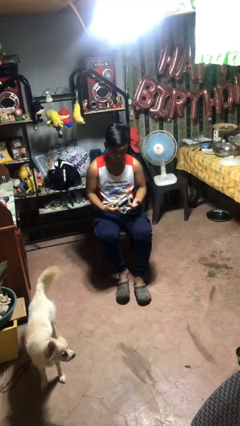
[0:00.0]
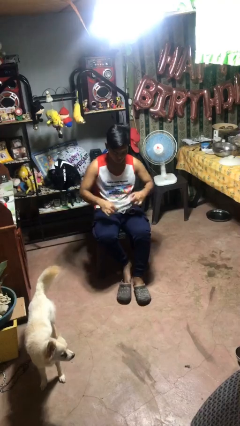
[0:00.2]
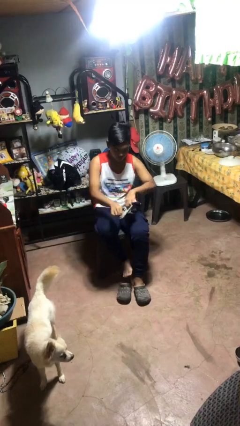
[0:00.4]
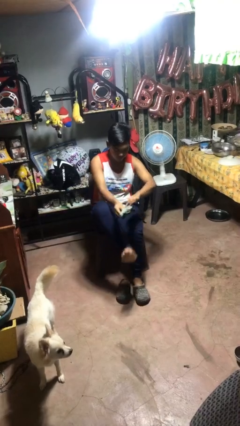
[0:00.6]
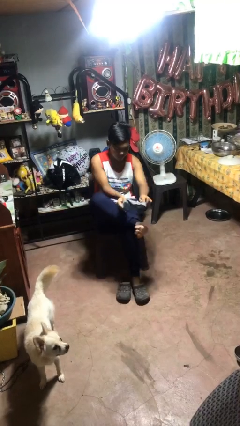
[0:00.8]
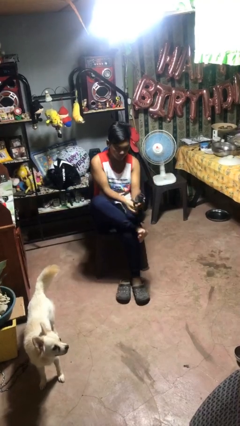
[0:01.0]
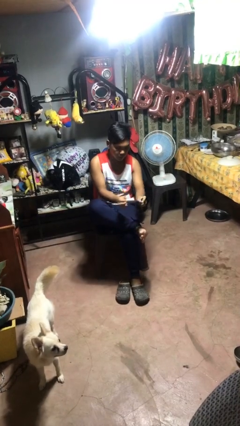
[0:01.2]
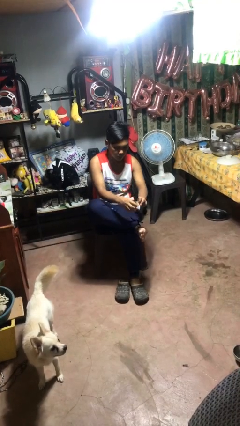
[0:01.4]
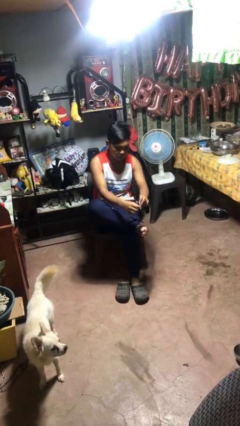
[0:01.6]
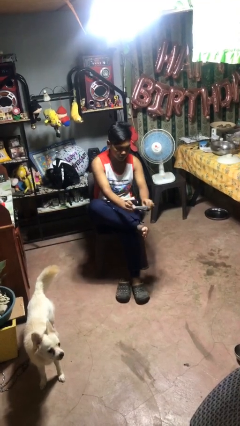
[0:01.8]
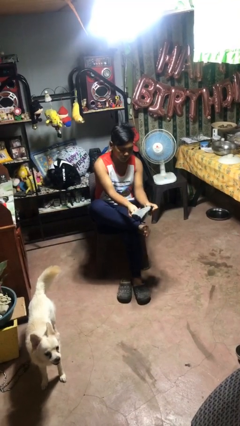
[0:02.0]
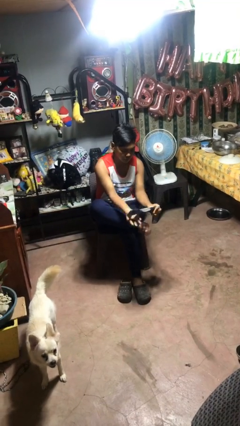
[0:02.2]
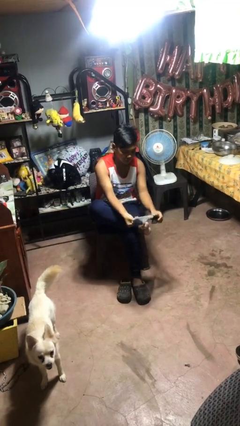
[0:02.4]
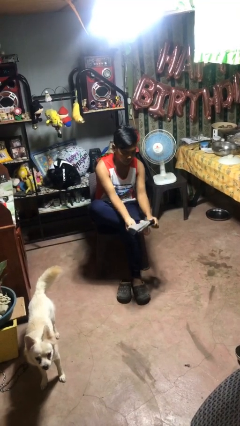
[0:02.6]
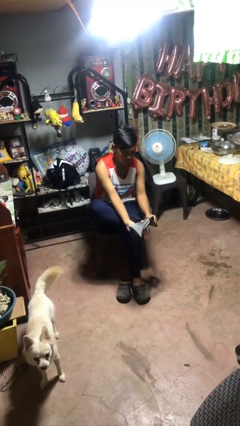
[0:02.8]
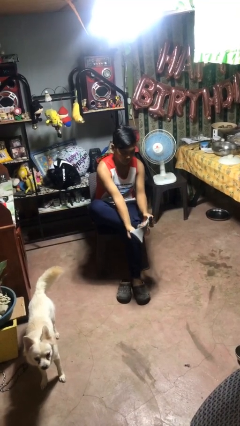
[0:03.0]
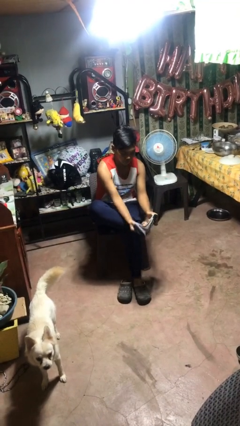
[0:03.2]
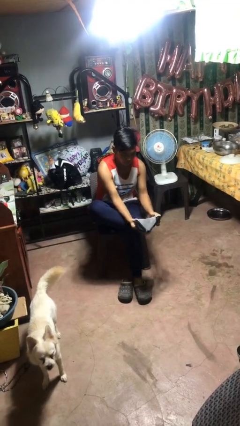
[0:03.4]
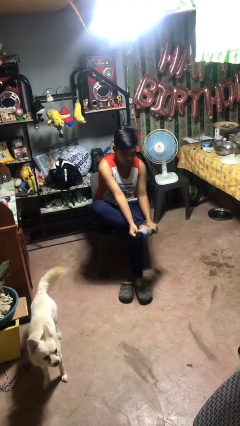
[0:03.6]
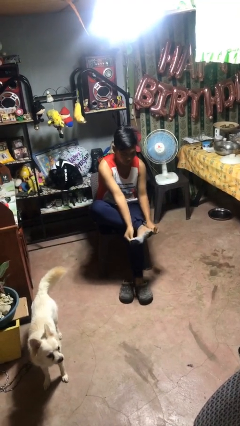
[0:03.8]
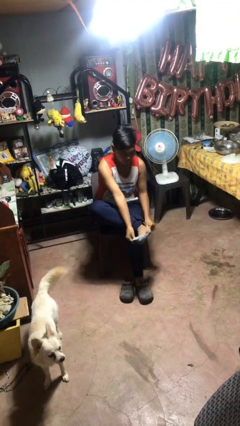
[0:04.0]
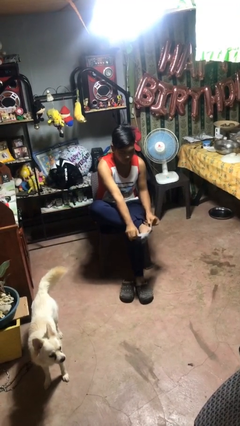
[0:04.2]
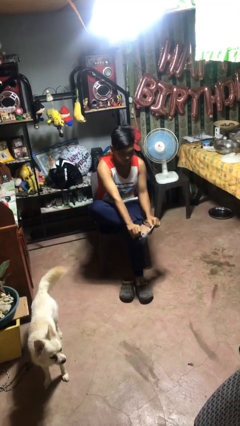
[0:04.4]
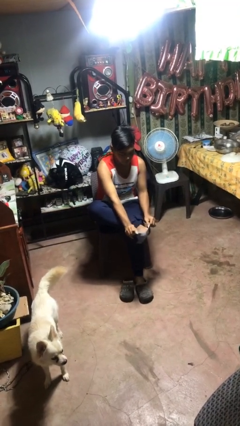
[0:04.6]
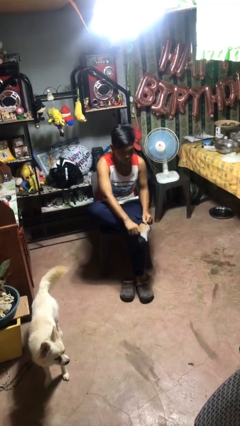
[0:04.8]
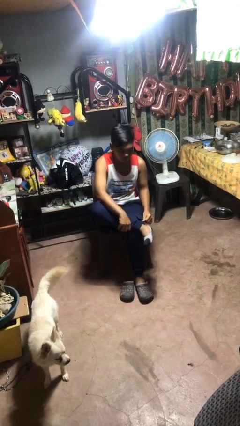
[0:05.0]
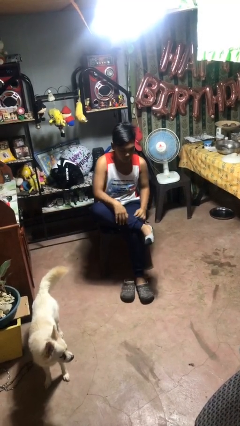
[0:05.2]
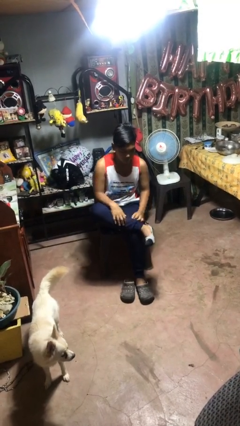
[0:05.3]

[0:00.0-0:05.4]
person puts on socks

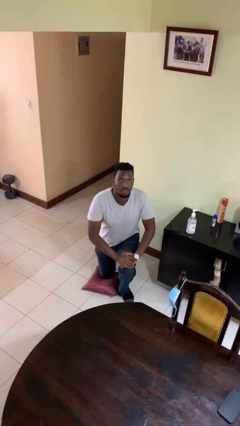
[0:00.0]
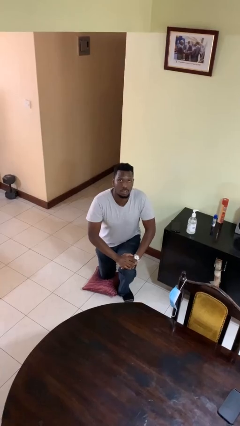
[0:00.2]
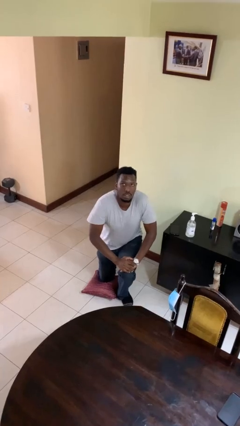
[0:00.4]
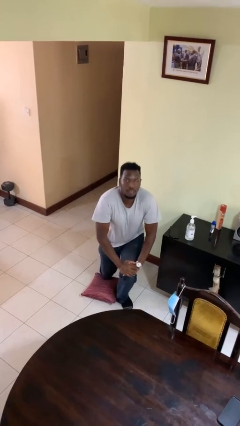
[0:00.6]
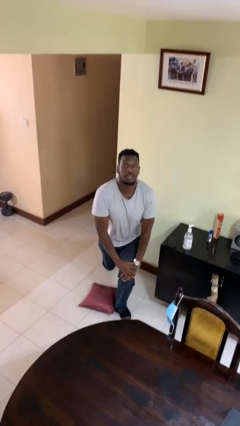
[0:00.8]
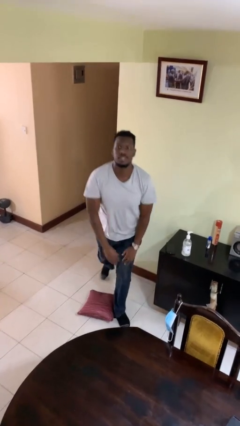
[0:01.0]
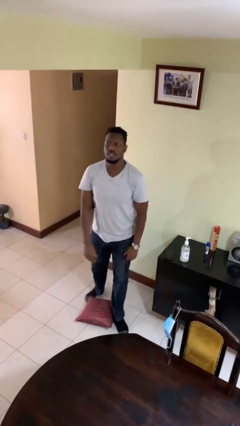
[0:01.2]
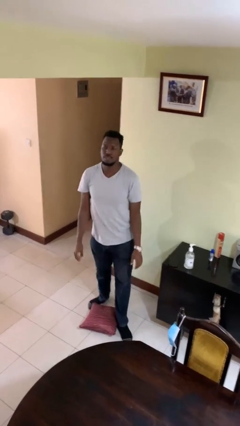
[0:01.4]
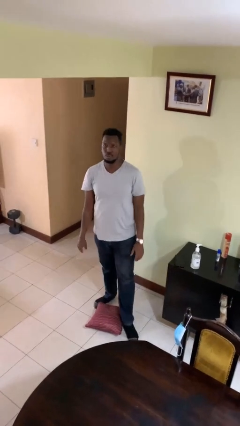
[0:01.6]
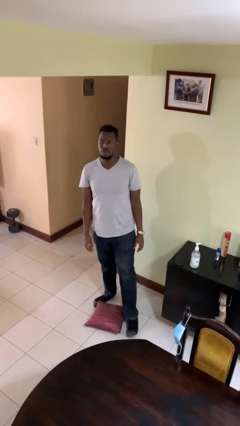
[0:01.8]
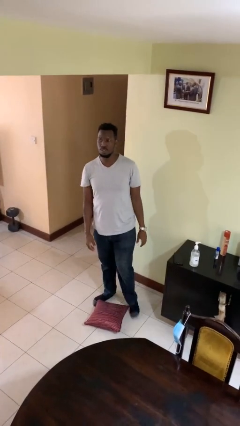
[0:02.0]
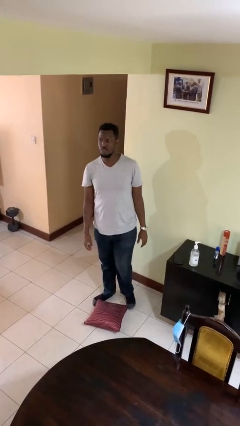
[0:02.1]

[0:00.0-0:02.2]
person stands up from floor

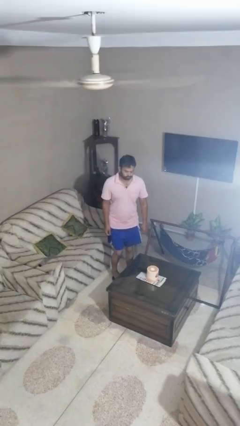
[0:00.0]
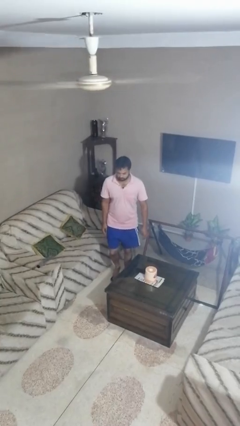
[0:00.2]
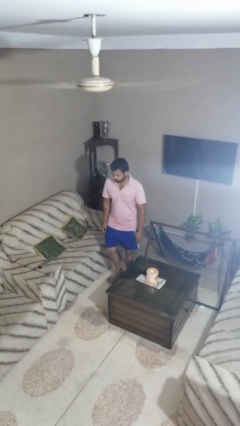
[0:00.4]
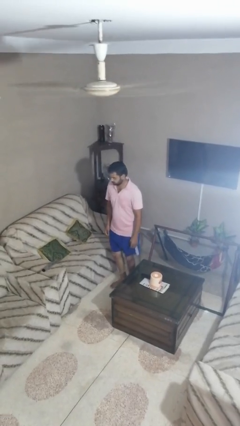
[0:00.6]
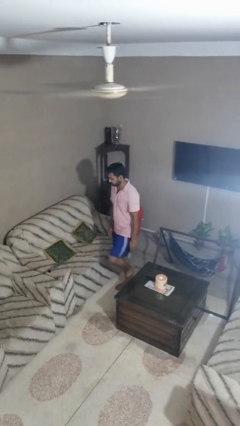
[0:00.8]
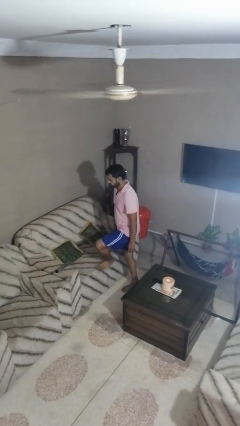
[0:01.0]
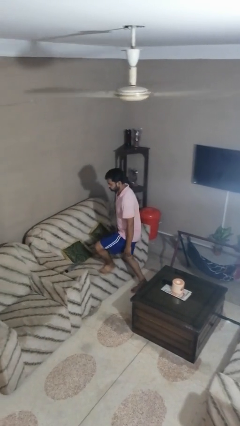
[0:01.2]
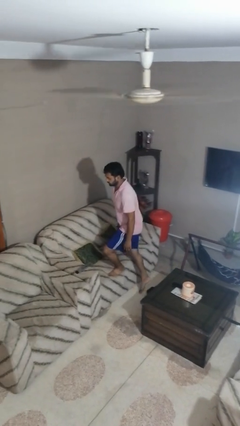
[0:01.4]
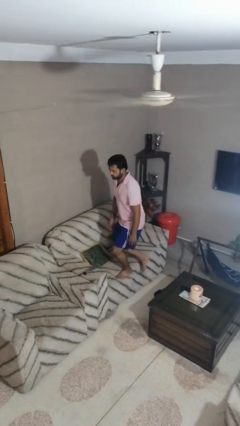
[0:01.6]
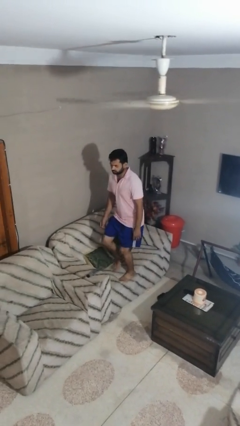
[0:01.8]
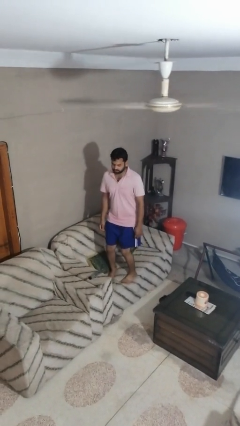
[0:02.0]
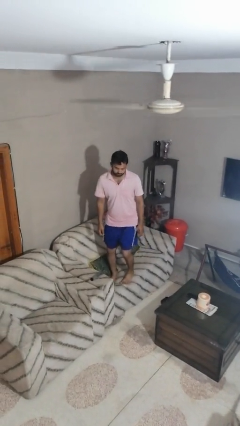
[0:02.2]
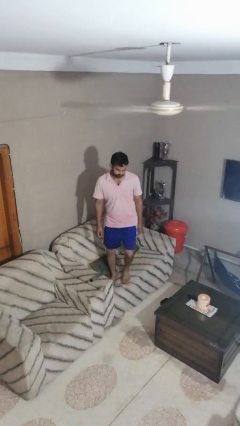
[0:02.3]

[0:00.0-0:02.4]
person climbs on couch

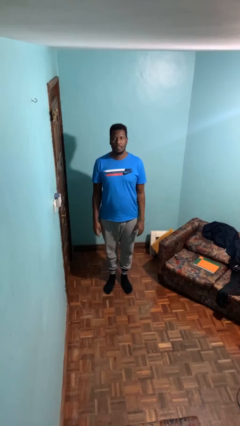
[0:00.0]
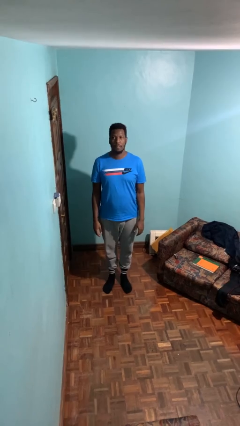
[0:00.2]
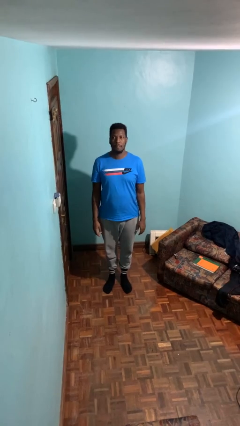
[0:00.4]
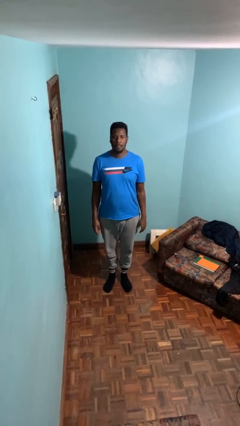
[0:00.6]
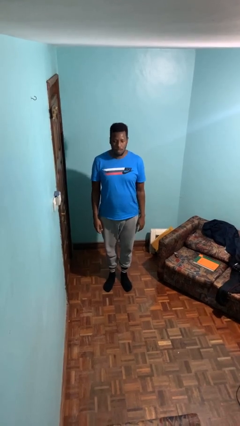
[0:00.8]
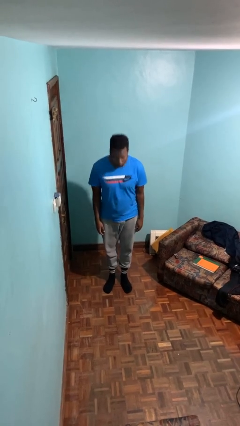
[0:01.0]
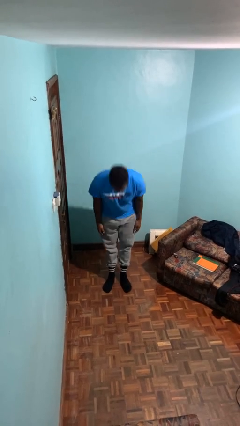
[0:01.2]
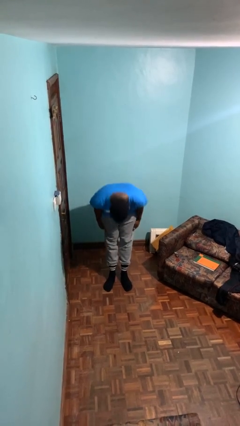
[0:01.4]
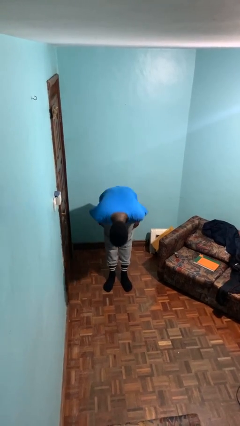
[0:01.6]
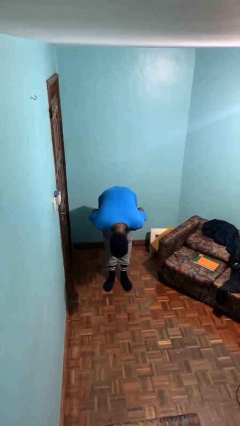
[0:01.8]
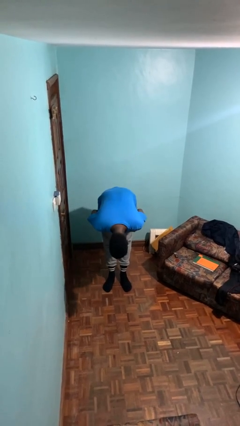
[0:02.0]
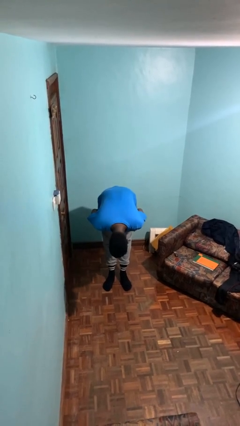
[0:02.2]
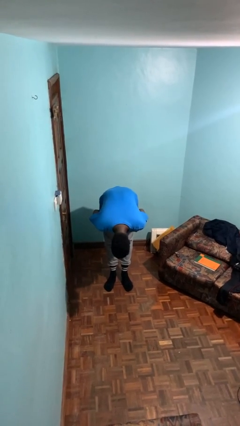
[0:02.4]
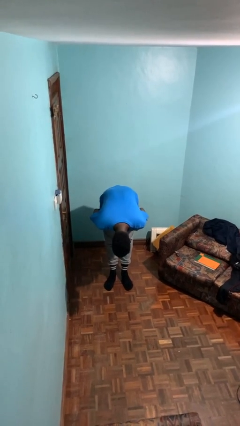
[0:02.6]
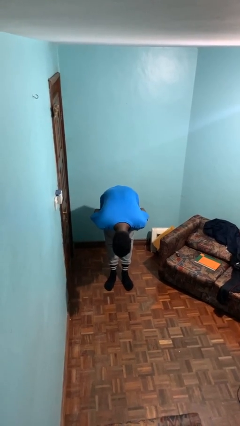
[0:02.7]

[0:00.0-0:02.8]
person bows

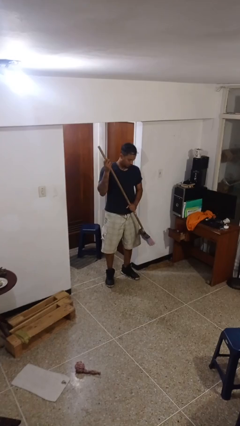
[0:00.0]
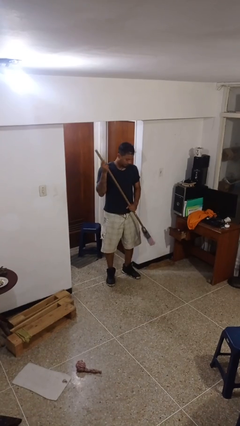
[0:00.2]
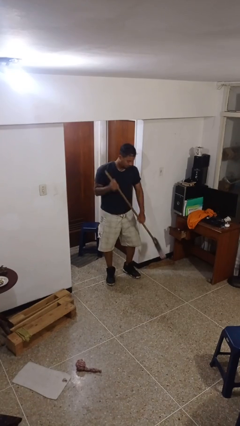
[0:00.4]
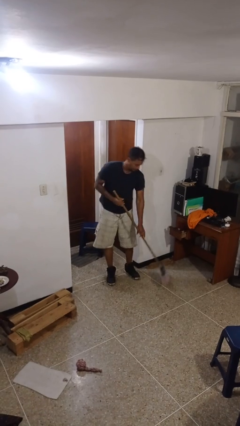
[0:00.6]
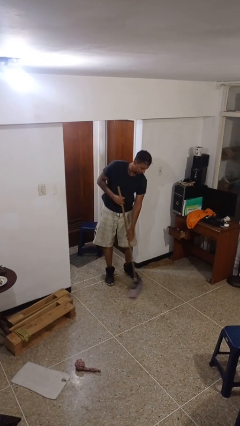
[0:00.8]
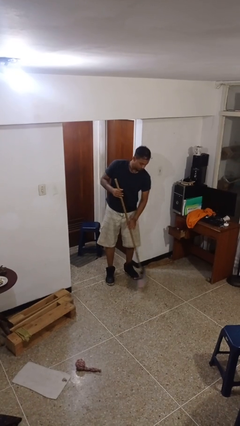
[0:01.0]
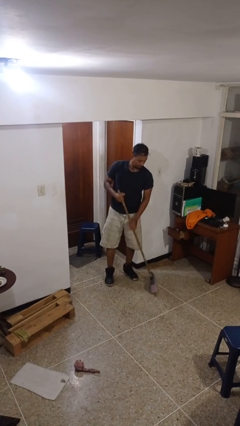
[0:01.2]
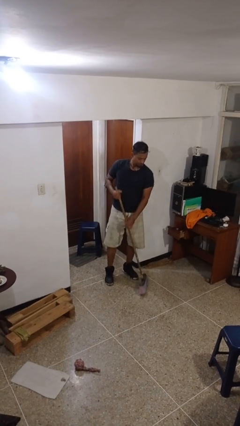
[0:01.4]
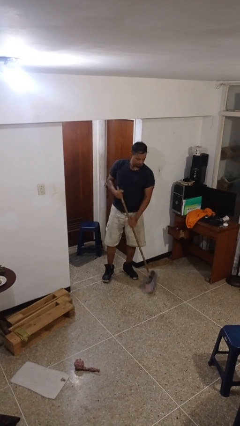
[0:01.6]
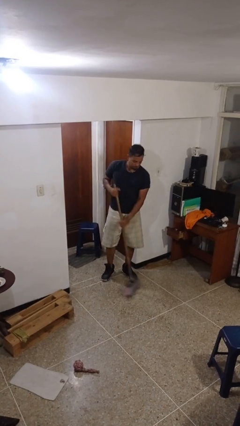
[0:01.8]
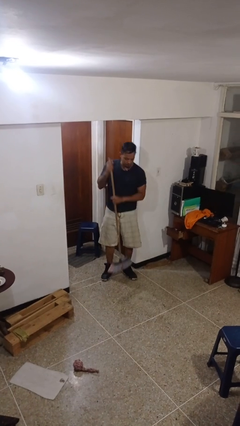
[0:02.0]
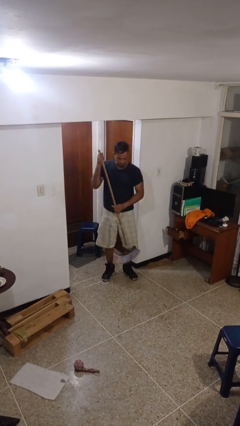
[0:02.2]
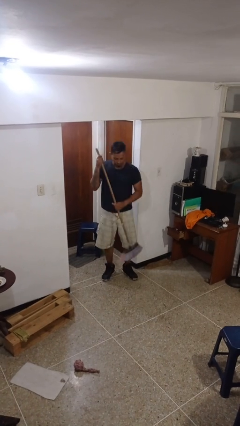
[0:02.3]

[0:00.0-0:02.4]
person sweeps floor

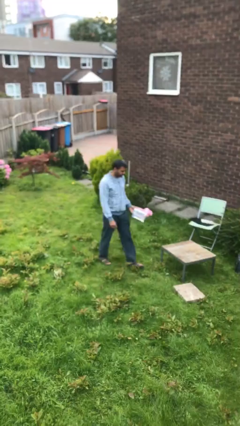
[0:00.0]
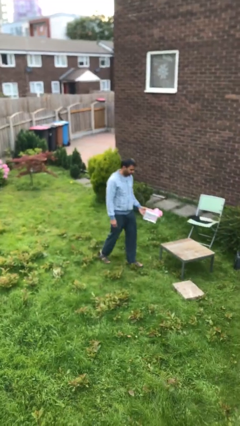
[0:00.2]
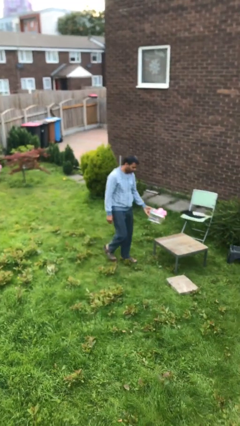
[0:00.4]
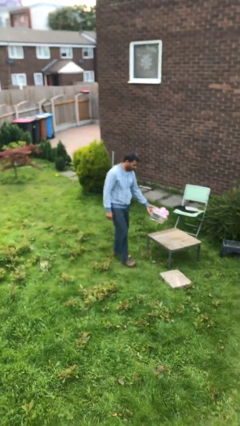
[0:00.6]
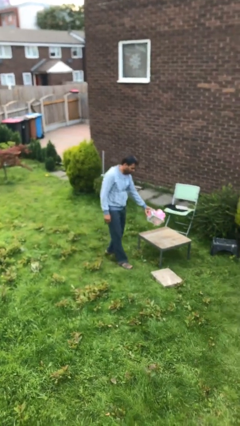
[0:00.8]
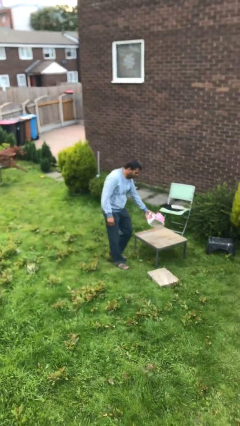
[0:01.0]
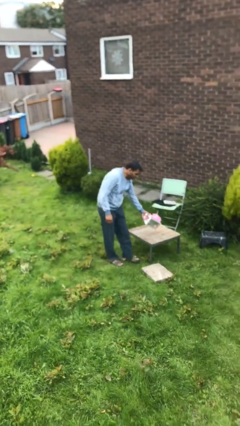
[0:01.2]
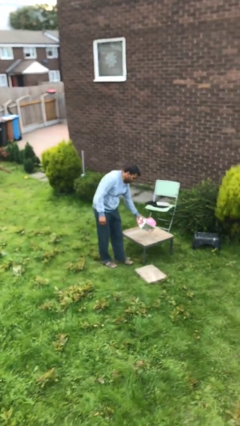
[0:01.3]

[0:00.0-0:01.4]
person puts down object on table

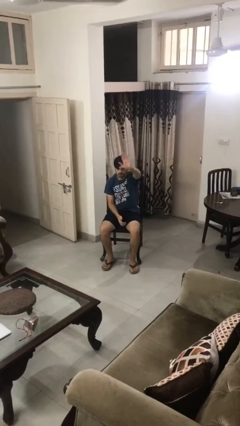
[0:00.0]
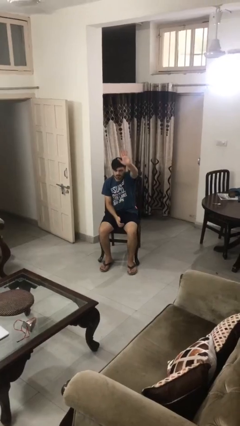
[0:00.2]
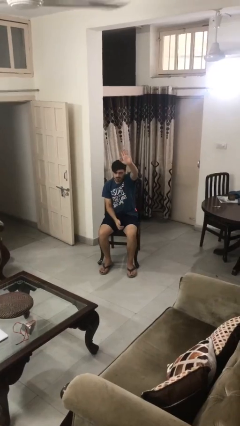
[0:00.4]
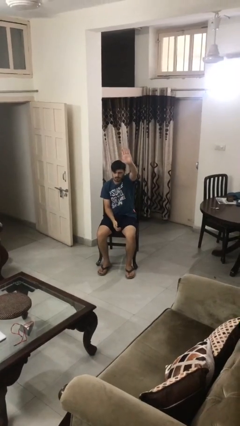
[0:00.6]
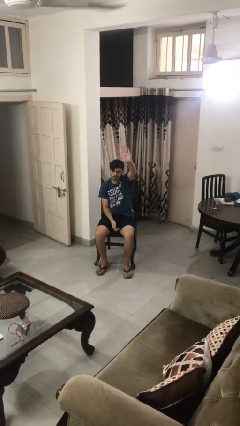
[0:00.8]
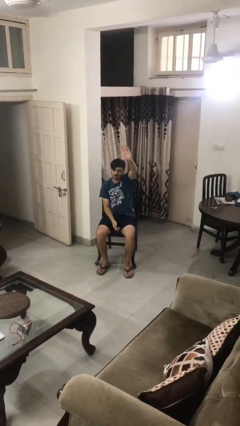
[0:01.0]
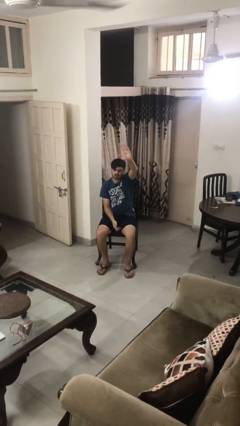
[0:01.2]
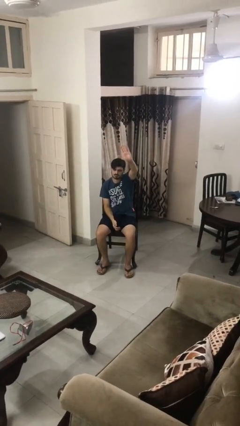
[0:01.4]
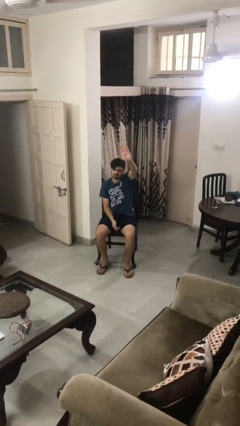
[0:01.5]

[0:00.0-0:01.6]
person gestures raise hand
